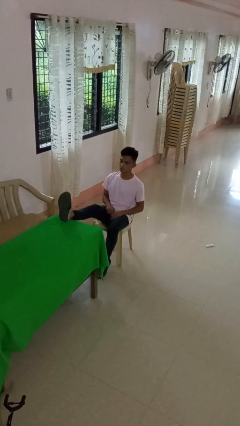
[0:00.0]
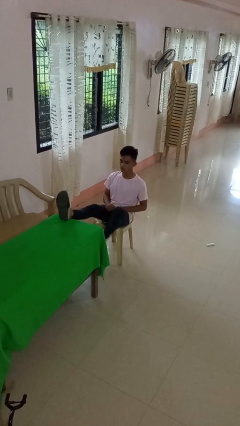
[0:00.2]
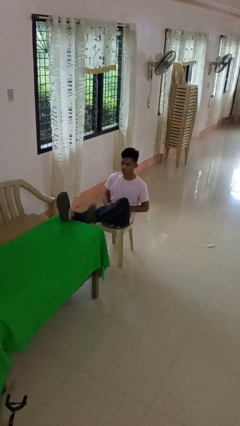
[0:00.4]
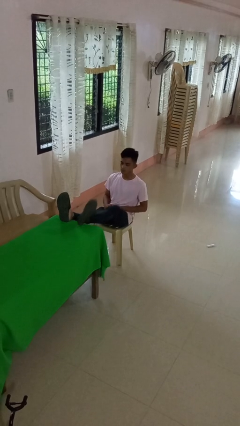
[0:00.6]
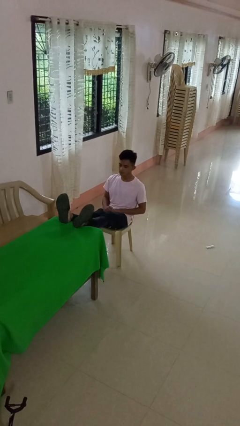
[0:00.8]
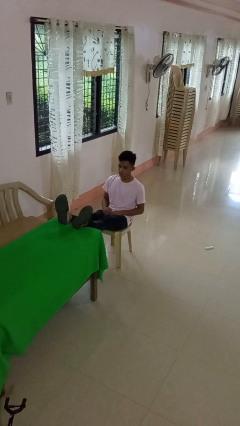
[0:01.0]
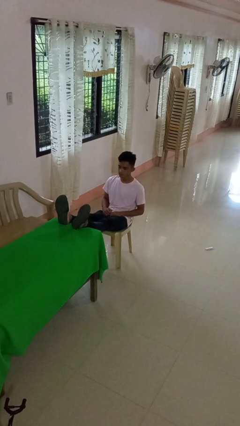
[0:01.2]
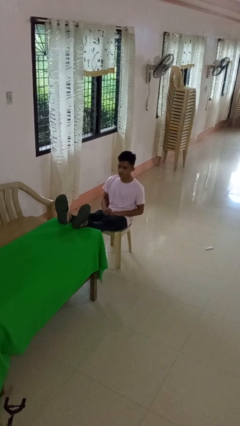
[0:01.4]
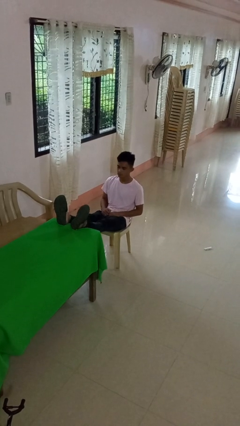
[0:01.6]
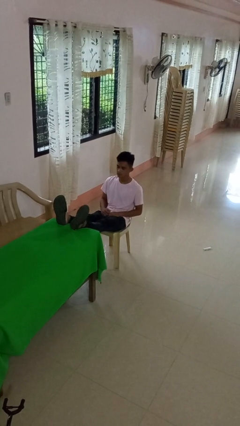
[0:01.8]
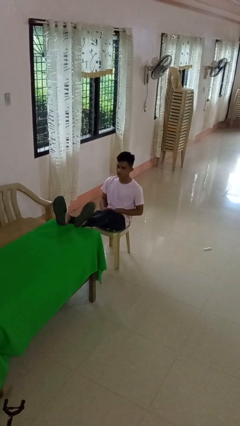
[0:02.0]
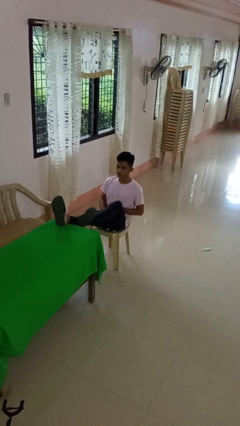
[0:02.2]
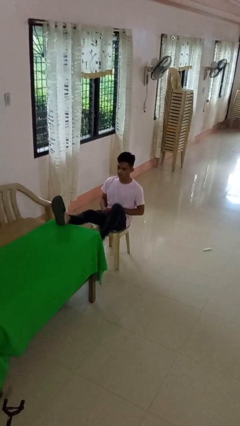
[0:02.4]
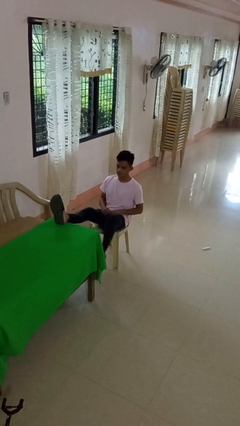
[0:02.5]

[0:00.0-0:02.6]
person puts feet up

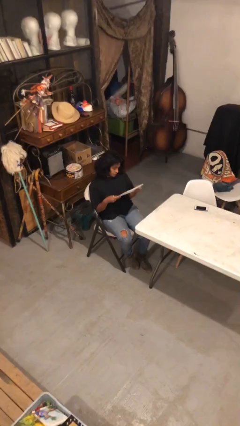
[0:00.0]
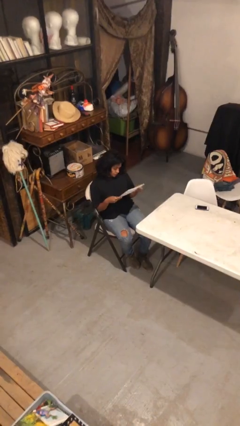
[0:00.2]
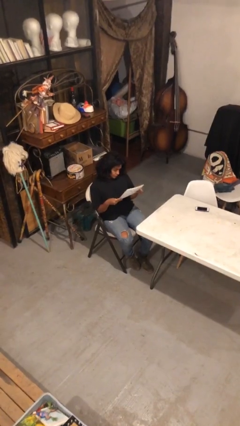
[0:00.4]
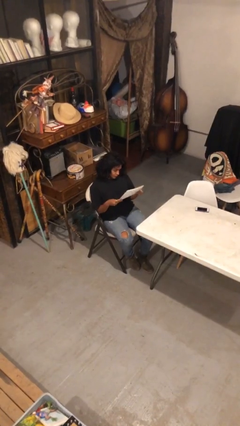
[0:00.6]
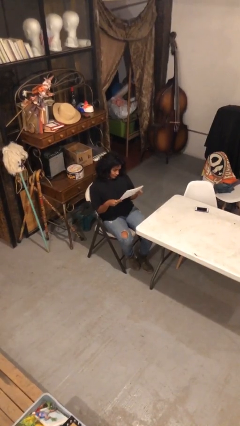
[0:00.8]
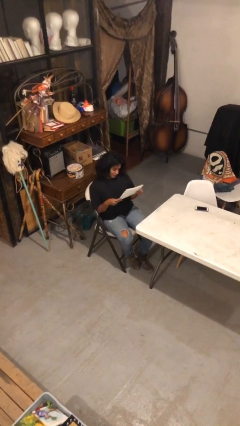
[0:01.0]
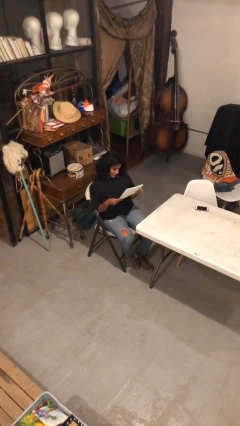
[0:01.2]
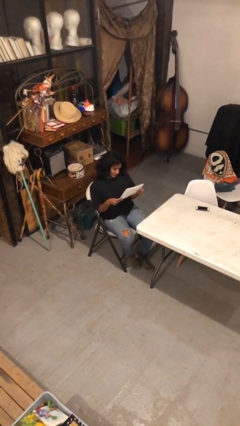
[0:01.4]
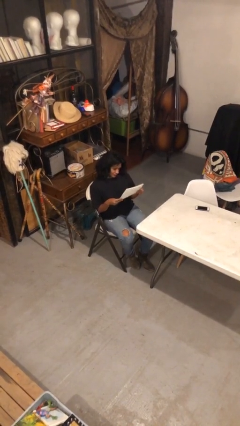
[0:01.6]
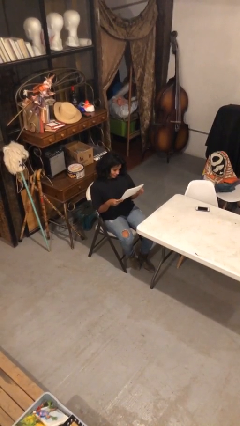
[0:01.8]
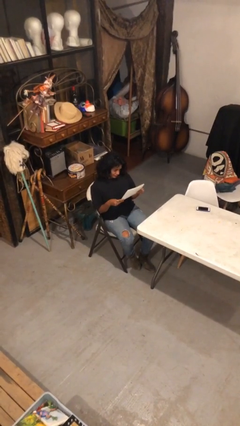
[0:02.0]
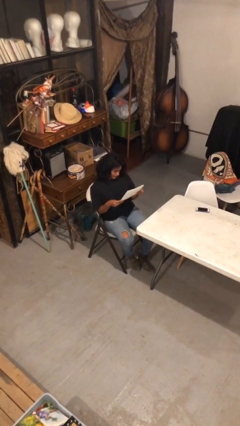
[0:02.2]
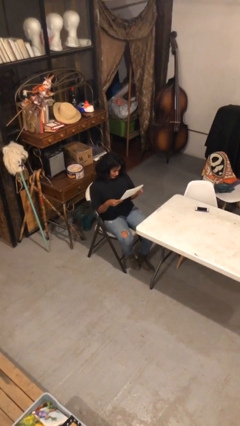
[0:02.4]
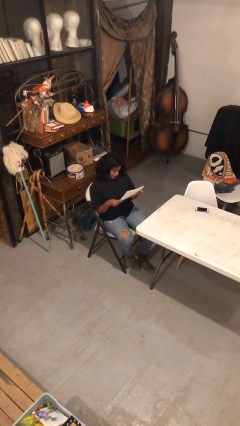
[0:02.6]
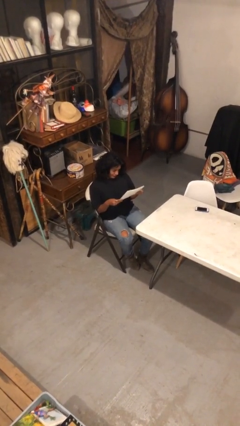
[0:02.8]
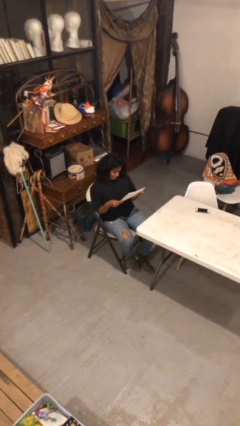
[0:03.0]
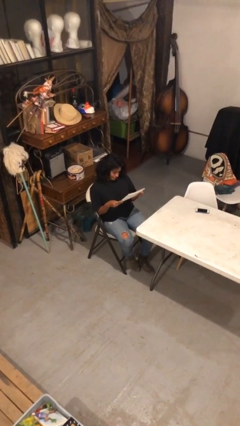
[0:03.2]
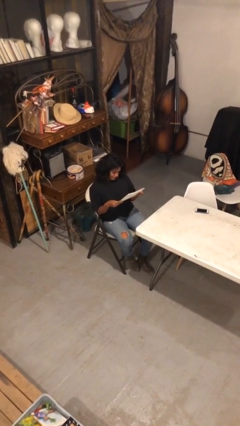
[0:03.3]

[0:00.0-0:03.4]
person reads document

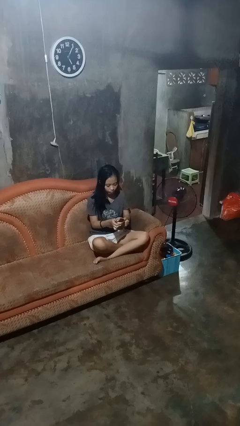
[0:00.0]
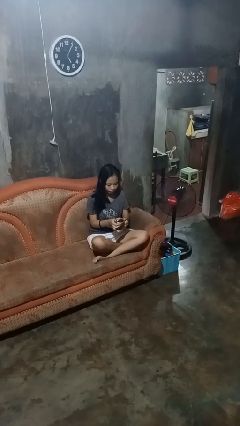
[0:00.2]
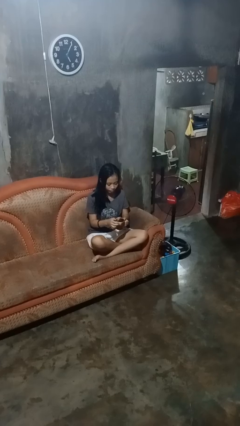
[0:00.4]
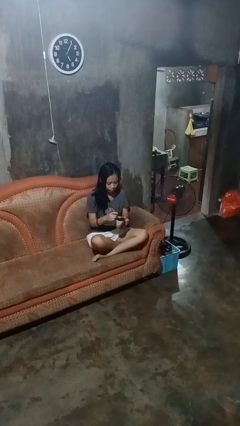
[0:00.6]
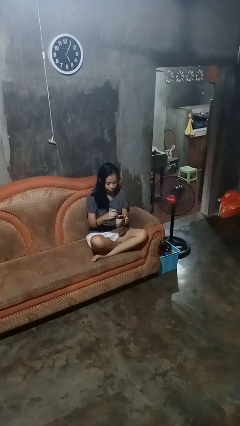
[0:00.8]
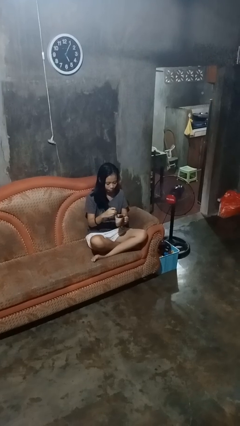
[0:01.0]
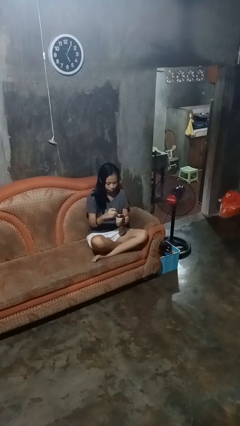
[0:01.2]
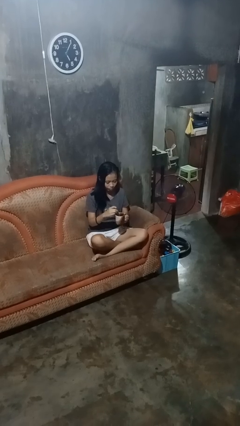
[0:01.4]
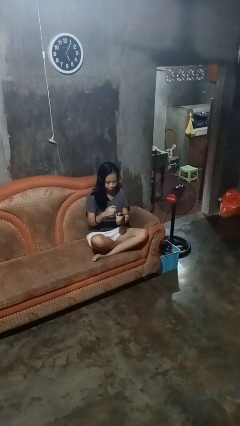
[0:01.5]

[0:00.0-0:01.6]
person stirs mug

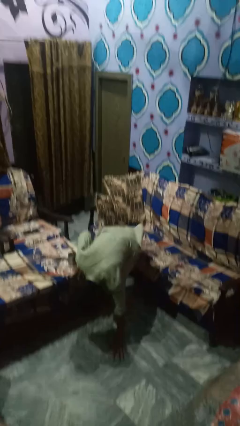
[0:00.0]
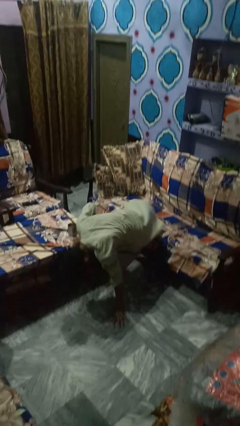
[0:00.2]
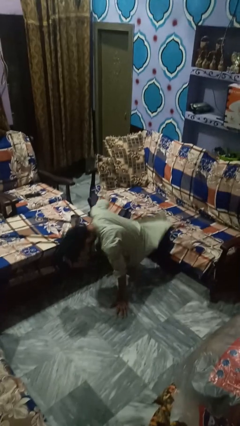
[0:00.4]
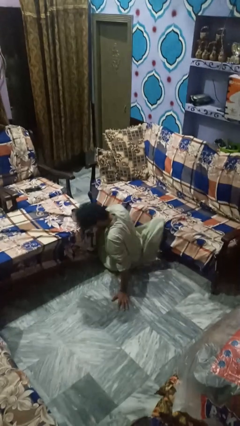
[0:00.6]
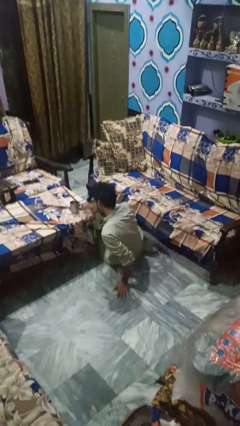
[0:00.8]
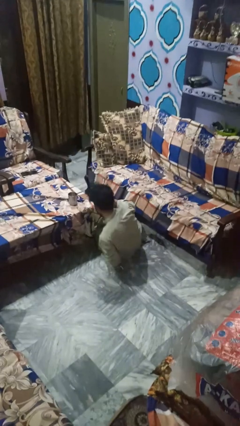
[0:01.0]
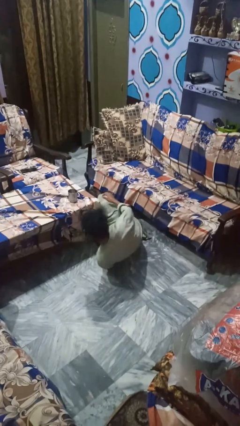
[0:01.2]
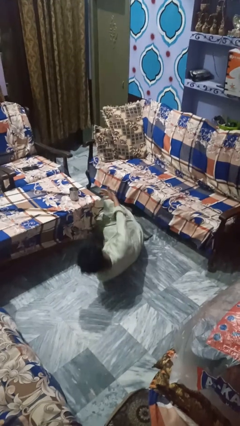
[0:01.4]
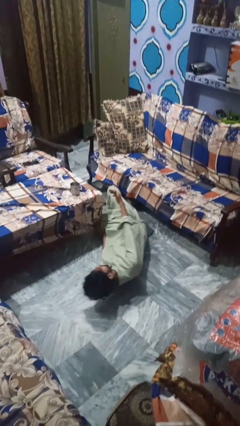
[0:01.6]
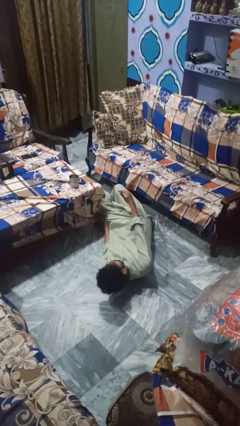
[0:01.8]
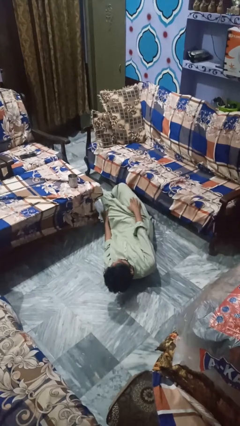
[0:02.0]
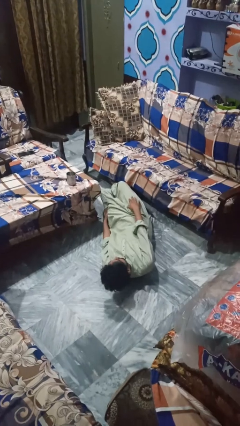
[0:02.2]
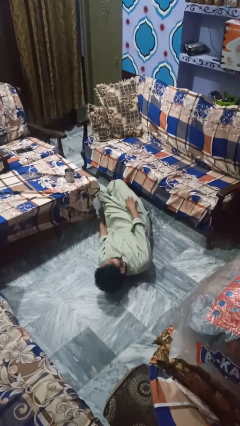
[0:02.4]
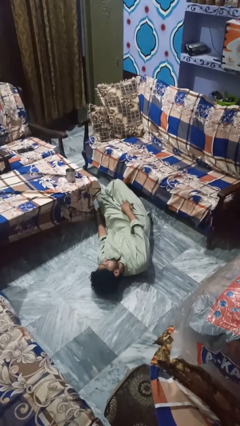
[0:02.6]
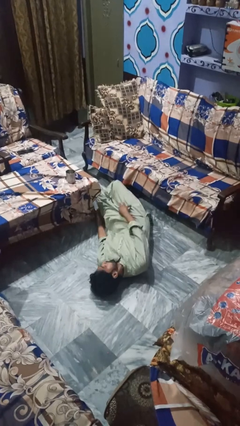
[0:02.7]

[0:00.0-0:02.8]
person lies down on floor

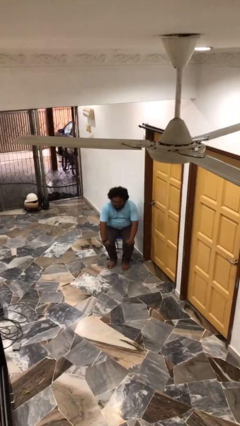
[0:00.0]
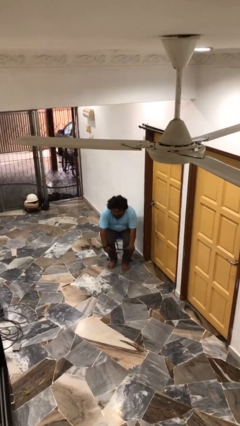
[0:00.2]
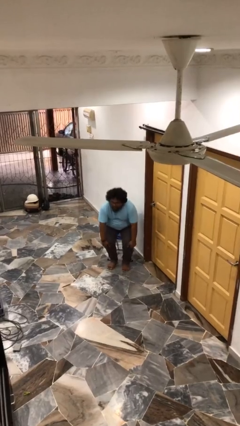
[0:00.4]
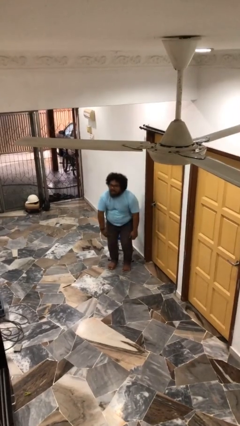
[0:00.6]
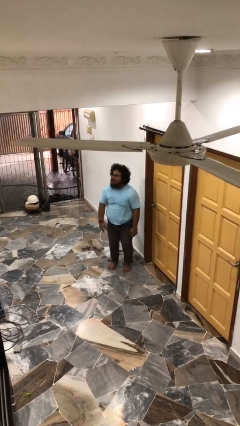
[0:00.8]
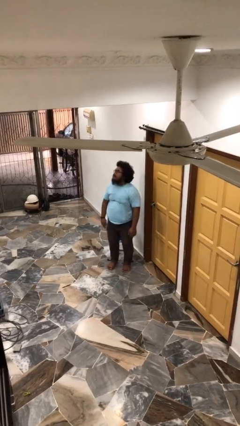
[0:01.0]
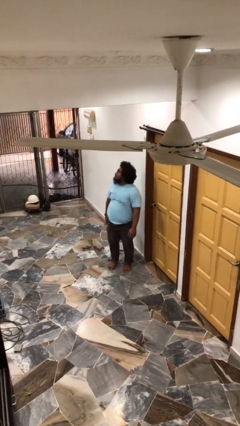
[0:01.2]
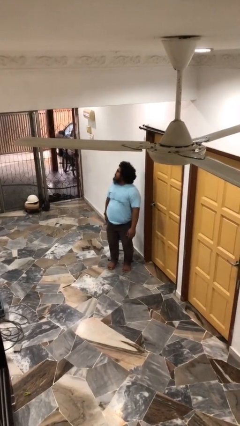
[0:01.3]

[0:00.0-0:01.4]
person stands up

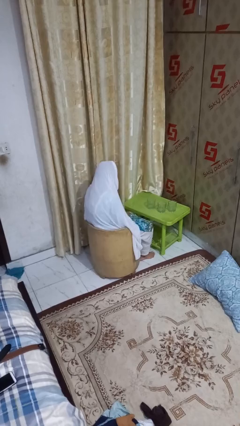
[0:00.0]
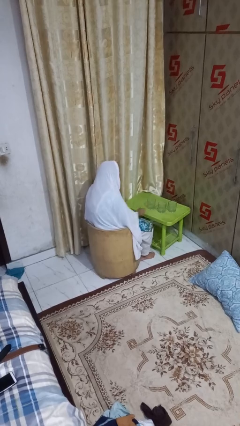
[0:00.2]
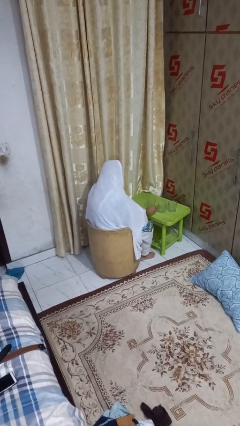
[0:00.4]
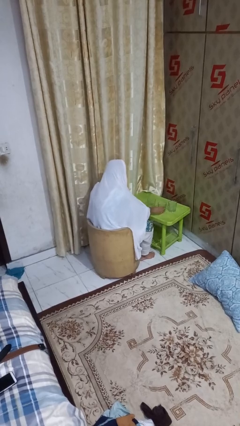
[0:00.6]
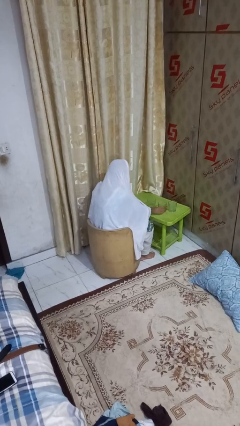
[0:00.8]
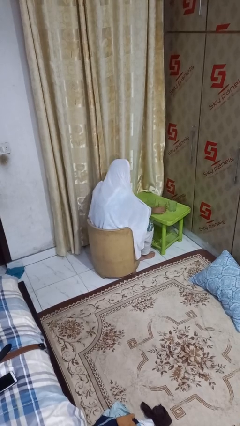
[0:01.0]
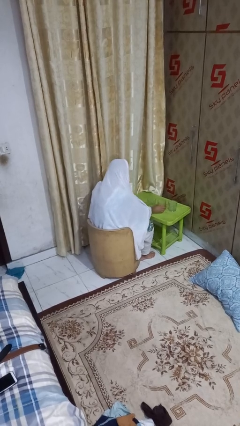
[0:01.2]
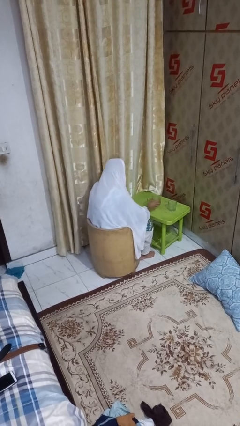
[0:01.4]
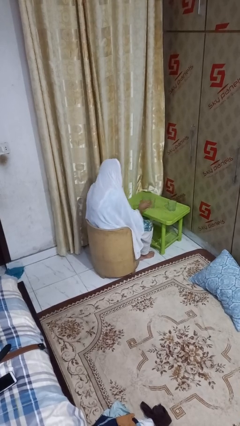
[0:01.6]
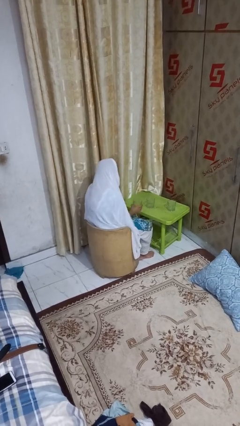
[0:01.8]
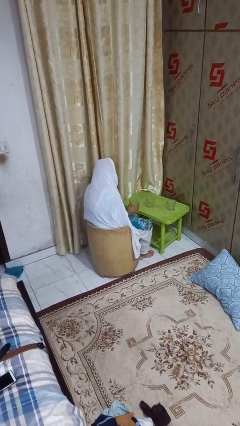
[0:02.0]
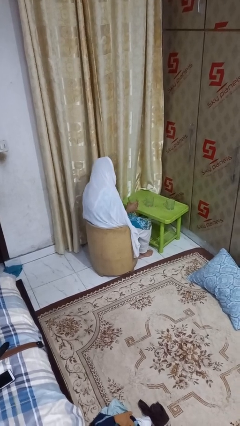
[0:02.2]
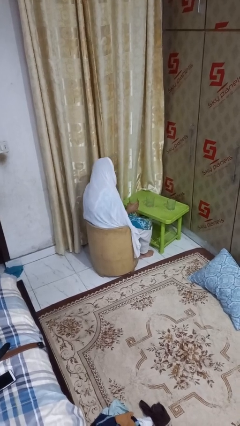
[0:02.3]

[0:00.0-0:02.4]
person picks up object from table

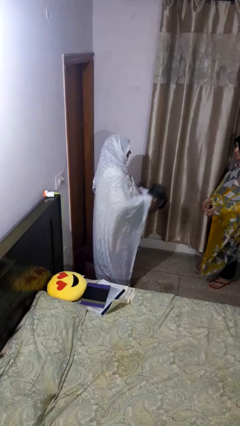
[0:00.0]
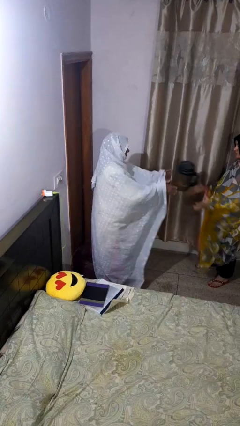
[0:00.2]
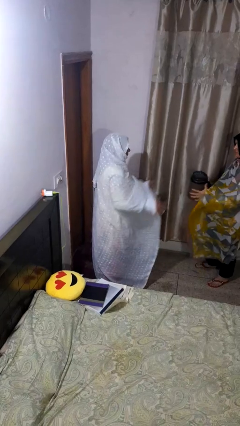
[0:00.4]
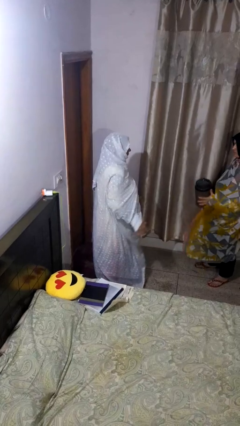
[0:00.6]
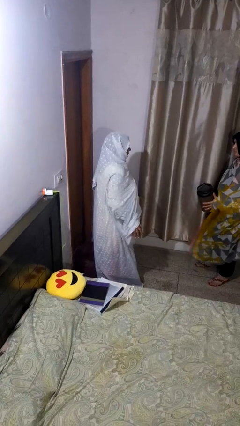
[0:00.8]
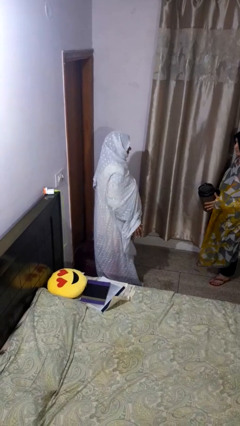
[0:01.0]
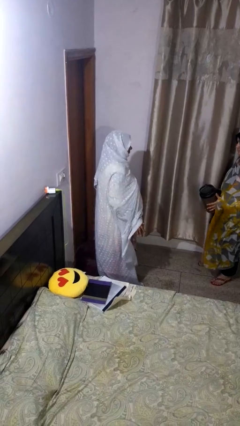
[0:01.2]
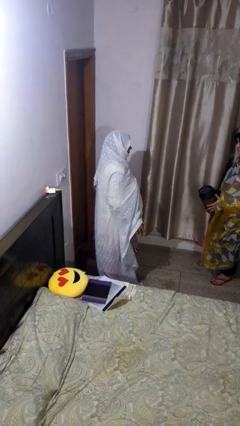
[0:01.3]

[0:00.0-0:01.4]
person throws object to person

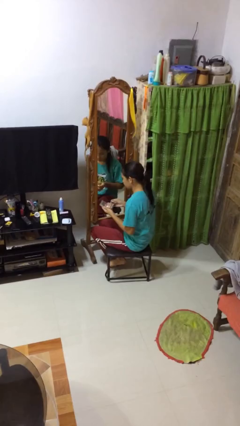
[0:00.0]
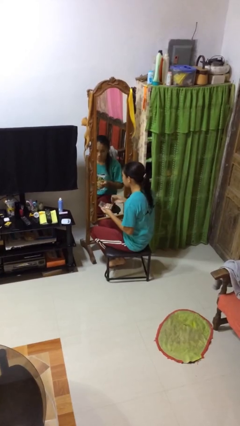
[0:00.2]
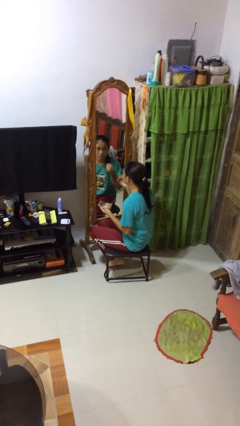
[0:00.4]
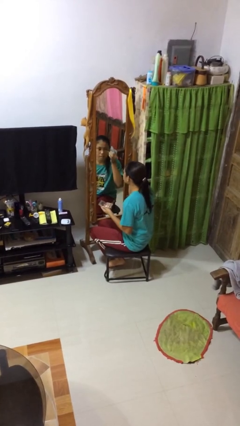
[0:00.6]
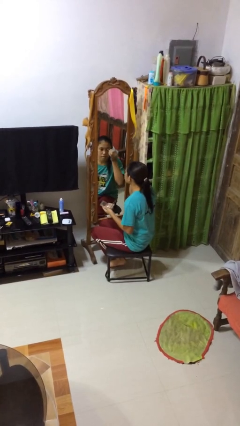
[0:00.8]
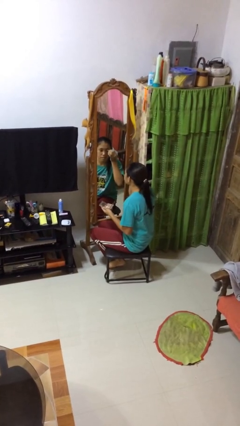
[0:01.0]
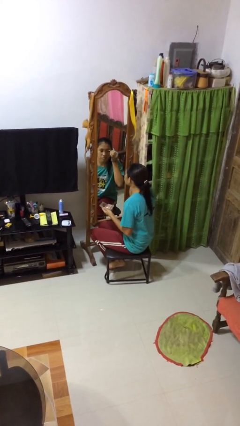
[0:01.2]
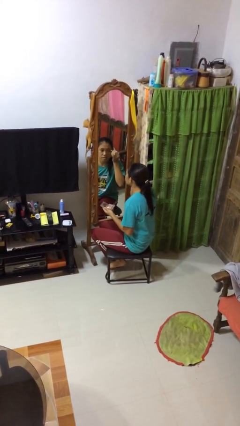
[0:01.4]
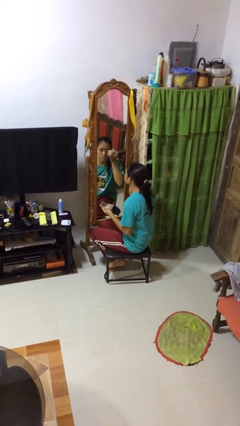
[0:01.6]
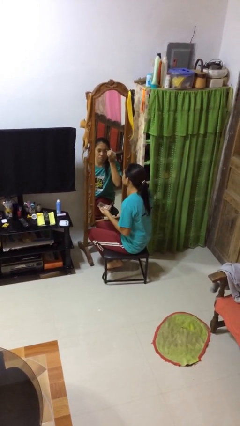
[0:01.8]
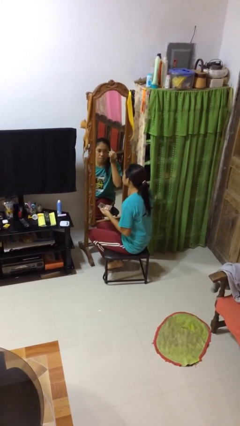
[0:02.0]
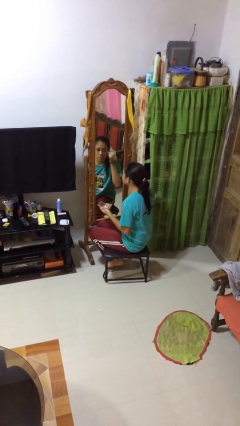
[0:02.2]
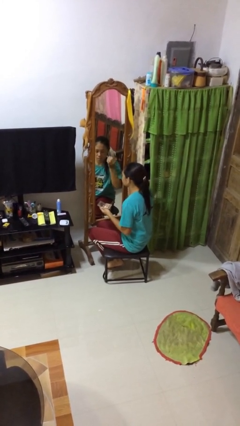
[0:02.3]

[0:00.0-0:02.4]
person applies eye makeup
